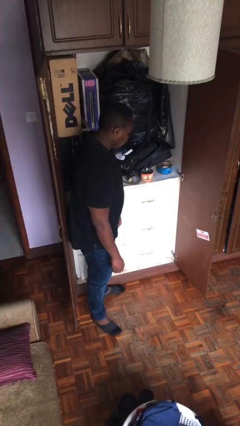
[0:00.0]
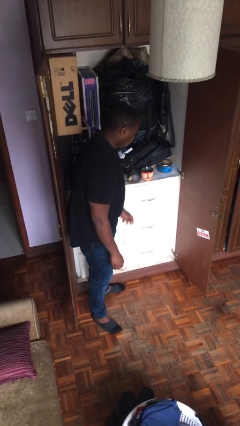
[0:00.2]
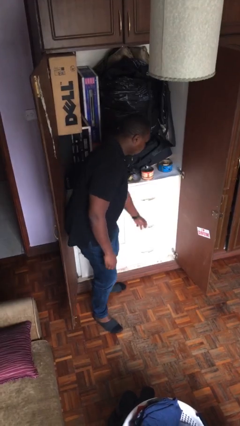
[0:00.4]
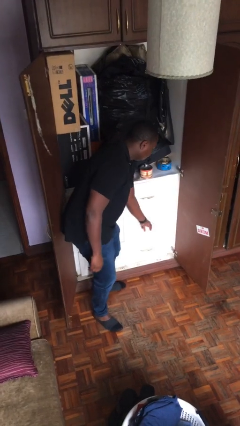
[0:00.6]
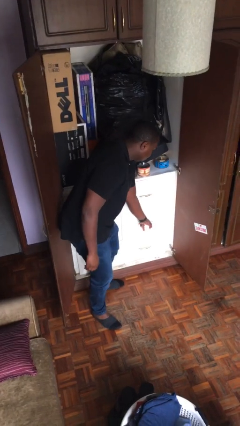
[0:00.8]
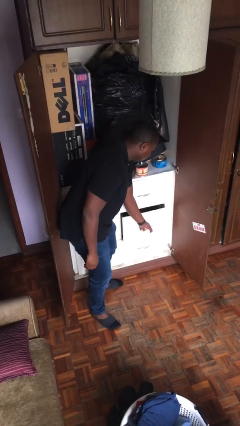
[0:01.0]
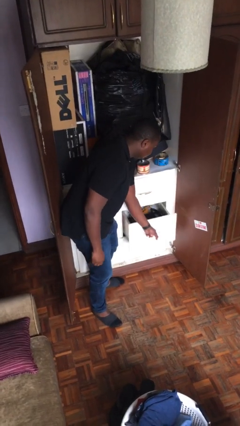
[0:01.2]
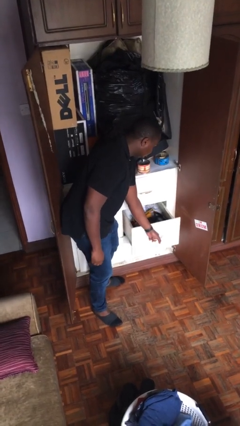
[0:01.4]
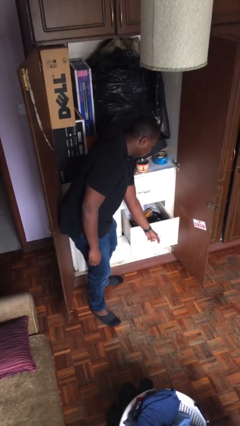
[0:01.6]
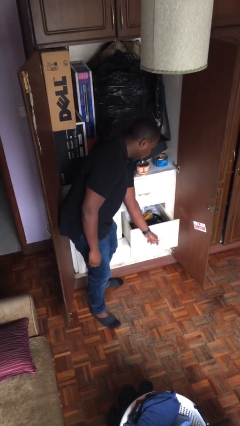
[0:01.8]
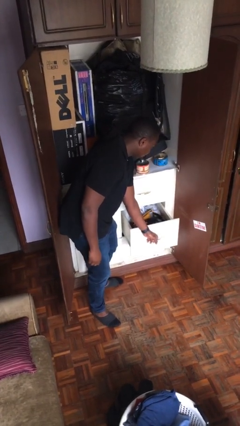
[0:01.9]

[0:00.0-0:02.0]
person opens dresser drawer

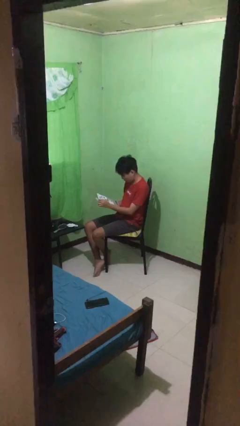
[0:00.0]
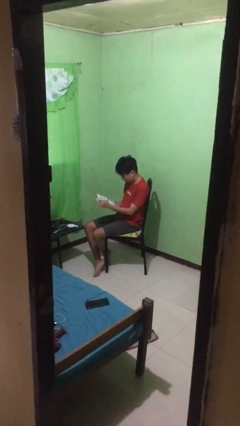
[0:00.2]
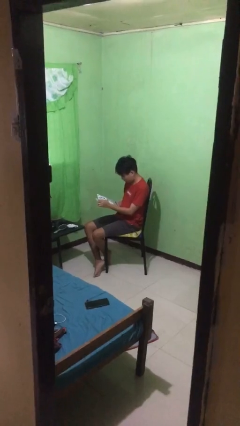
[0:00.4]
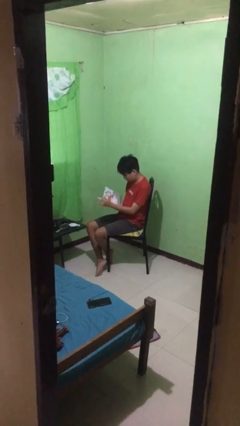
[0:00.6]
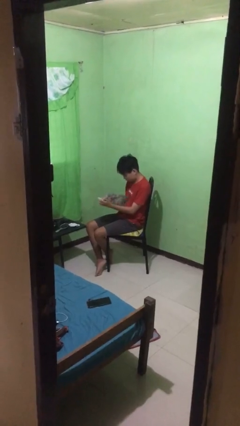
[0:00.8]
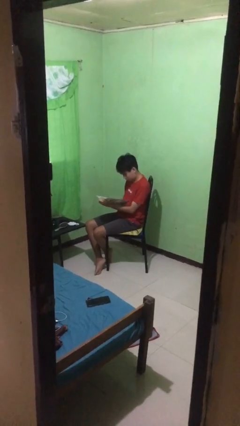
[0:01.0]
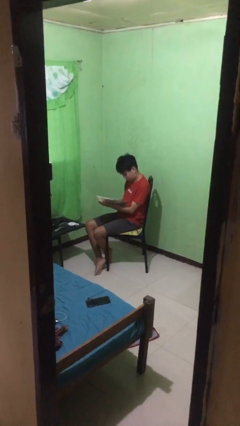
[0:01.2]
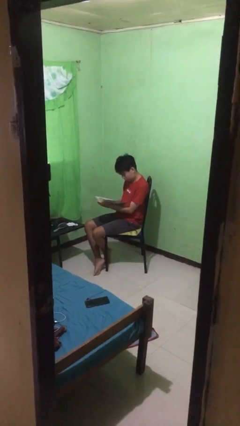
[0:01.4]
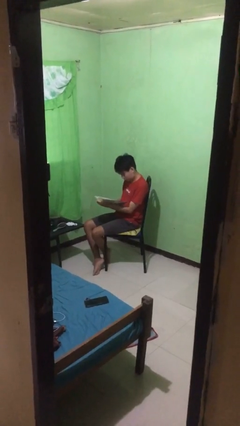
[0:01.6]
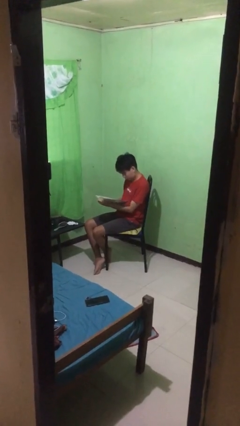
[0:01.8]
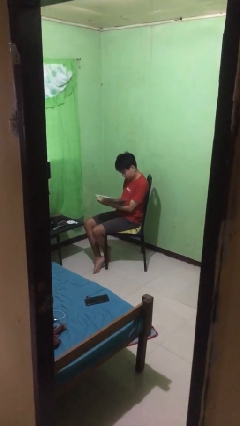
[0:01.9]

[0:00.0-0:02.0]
person reads document

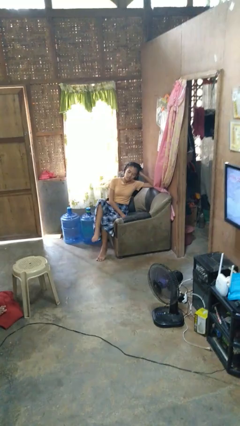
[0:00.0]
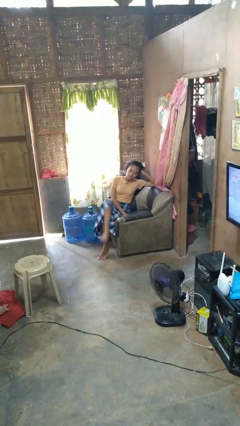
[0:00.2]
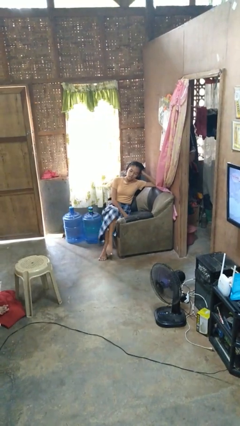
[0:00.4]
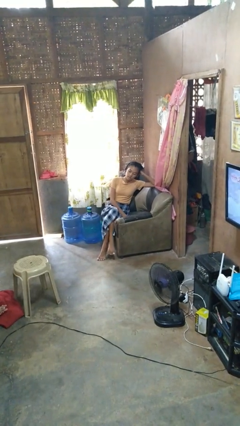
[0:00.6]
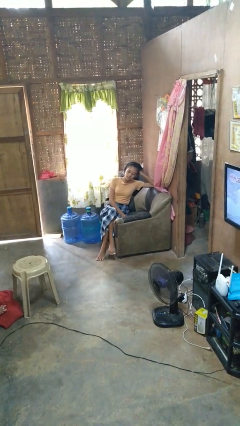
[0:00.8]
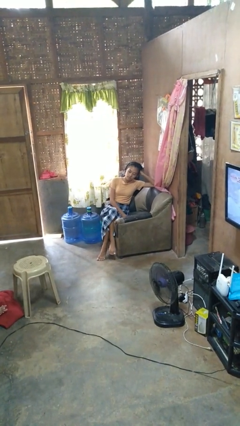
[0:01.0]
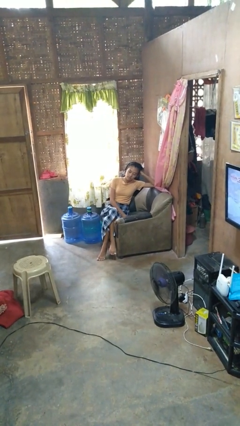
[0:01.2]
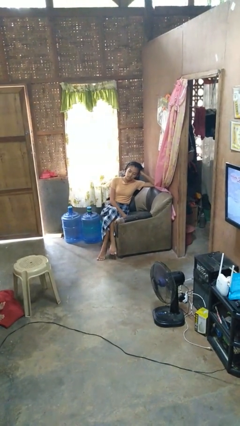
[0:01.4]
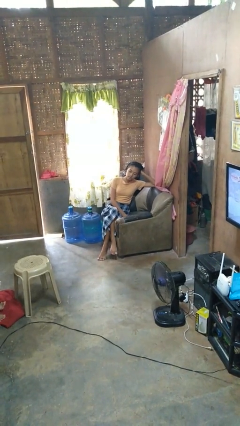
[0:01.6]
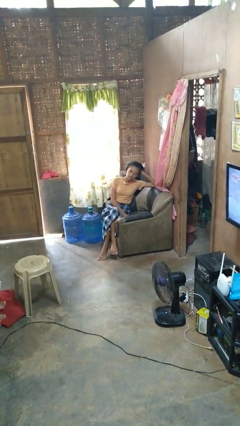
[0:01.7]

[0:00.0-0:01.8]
person crosses legs

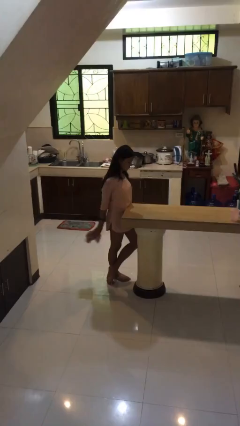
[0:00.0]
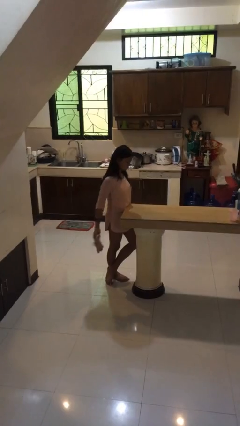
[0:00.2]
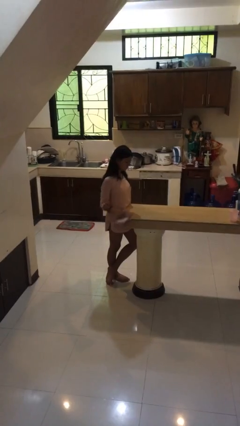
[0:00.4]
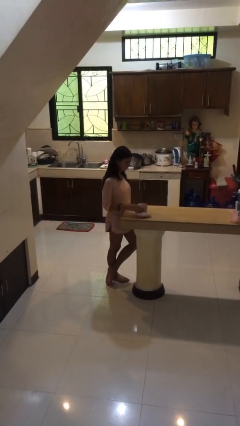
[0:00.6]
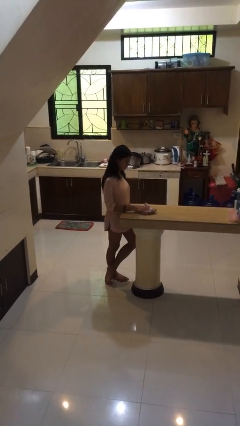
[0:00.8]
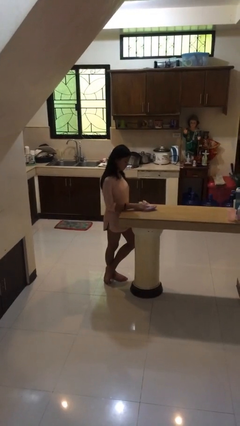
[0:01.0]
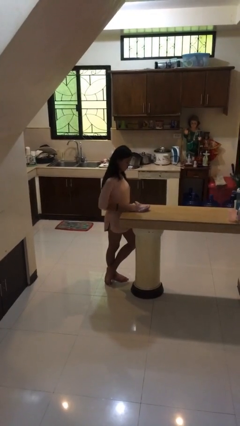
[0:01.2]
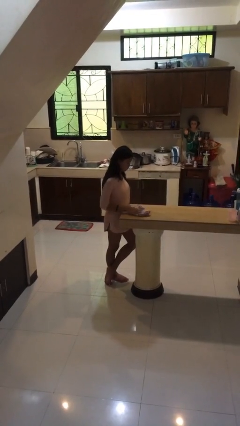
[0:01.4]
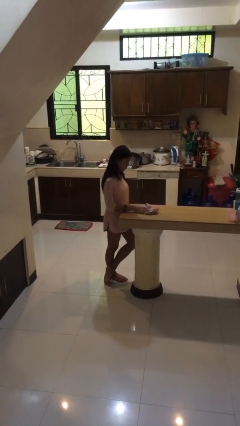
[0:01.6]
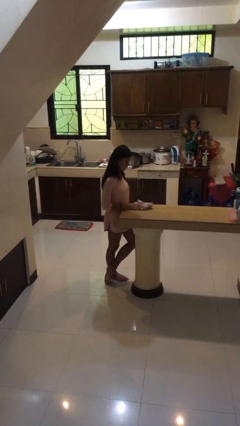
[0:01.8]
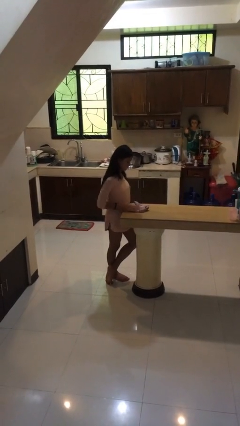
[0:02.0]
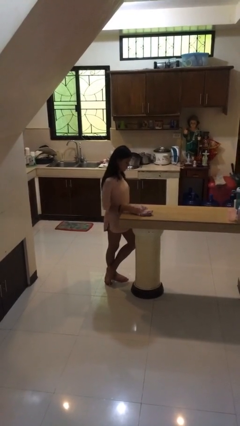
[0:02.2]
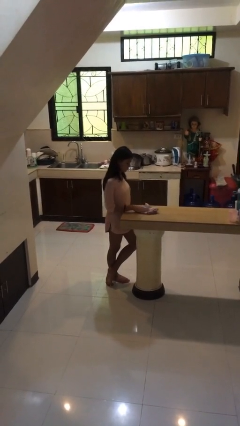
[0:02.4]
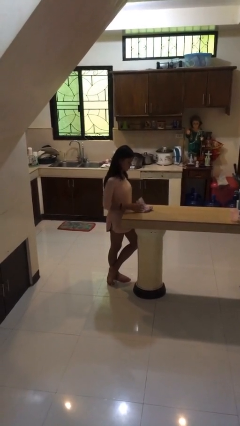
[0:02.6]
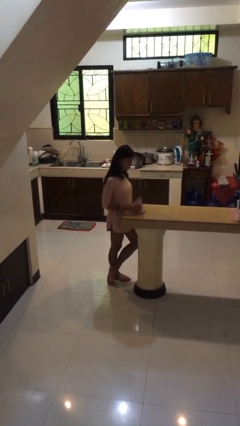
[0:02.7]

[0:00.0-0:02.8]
person cleans table with rag

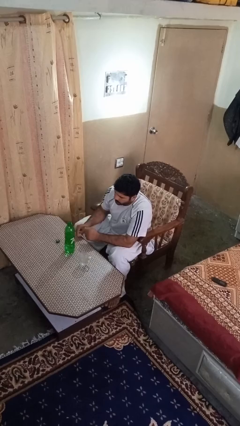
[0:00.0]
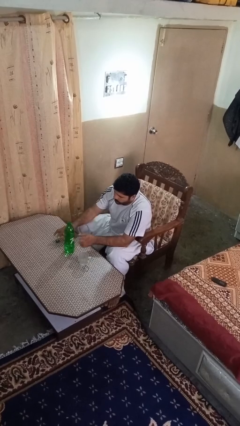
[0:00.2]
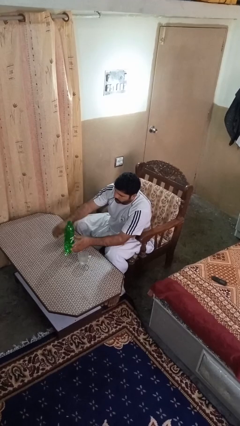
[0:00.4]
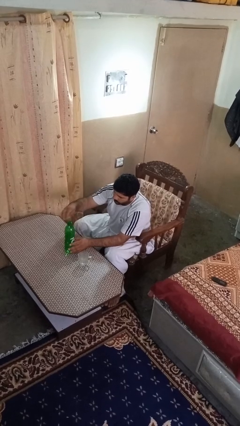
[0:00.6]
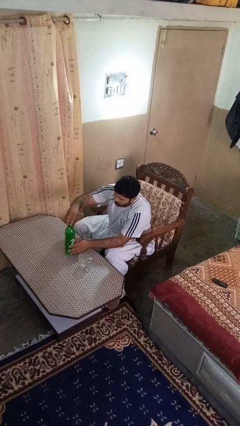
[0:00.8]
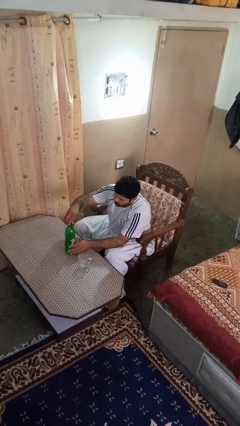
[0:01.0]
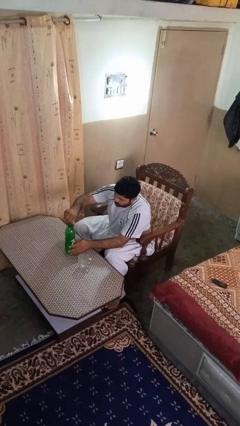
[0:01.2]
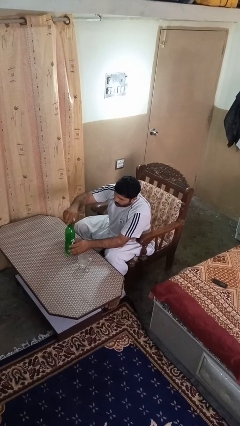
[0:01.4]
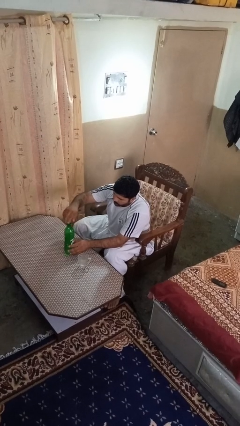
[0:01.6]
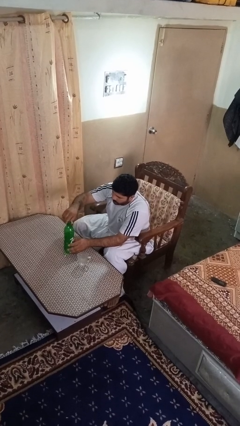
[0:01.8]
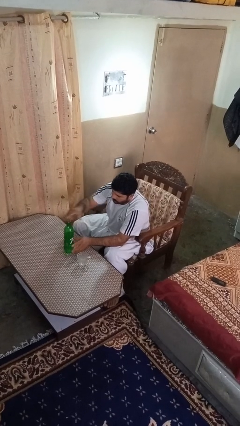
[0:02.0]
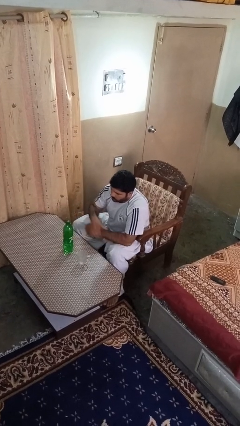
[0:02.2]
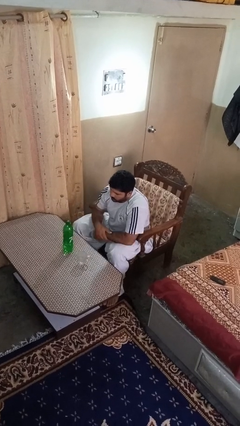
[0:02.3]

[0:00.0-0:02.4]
person screws lid to bottle

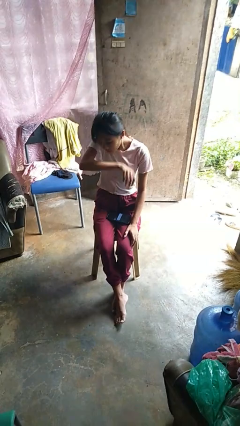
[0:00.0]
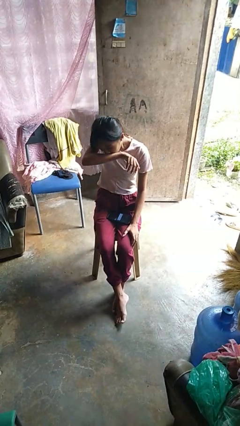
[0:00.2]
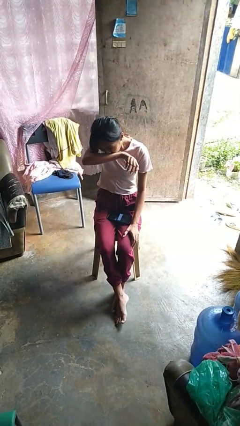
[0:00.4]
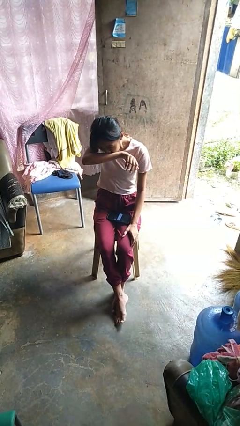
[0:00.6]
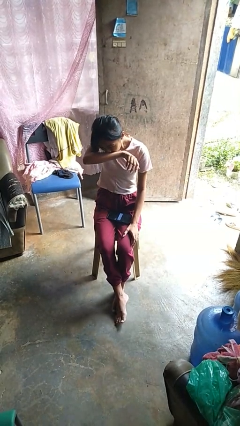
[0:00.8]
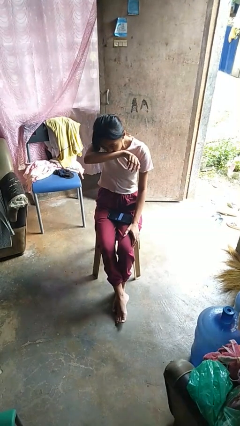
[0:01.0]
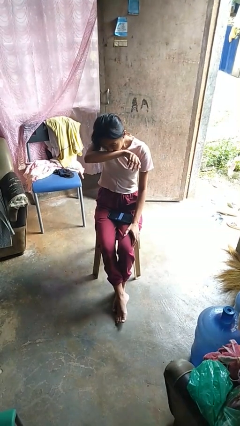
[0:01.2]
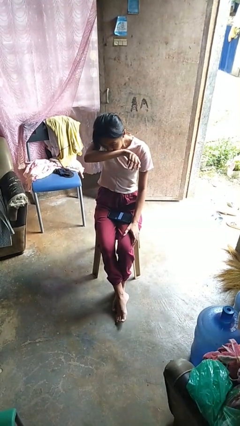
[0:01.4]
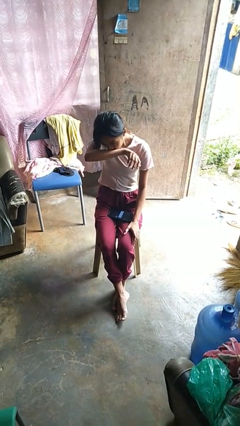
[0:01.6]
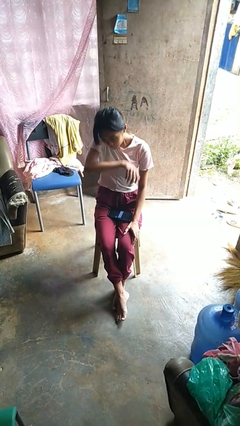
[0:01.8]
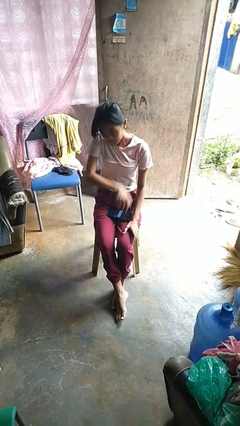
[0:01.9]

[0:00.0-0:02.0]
person sneezes into arm

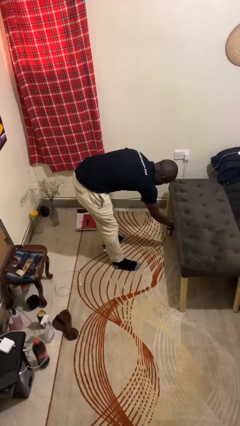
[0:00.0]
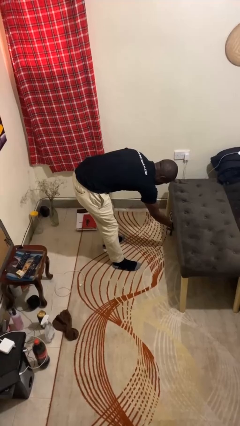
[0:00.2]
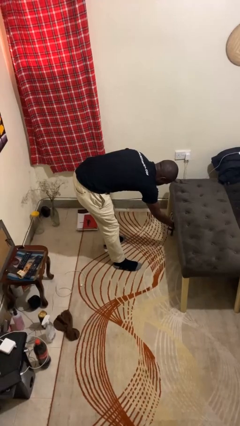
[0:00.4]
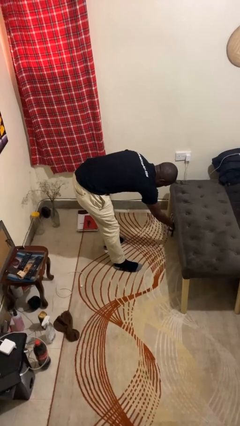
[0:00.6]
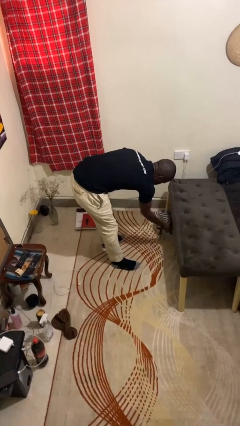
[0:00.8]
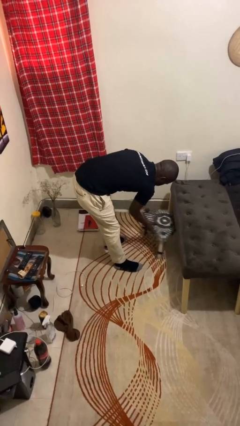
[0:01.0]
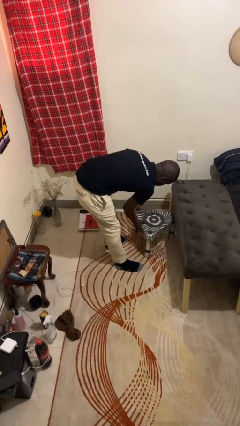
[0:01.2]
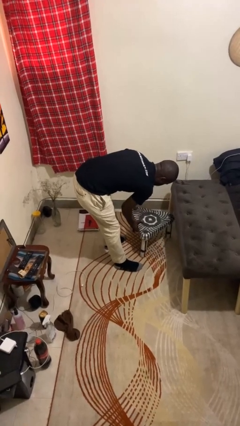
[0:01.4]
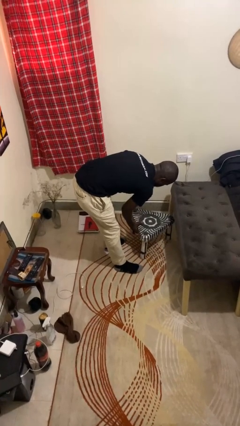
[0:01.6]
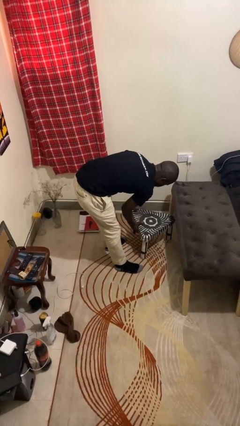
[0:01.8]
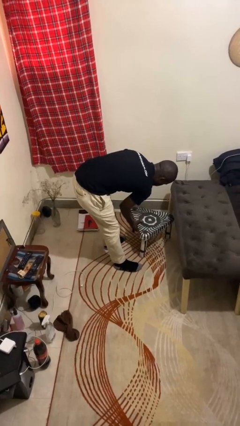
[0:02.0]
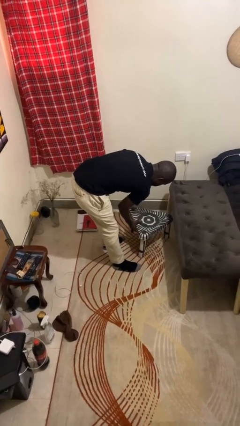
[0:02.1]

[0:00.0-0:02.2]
person pulls out chair

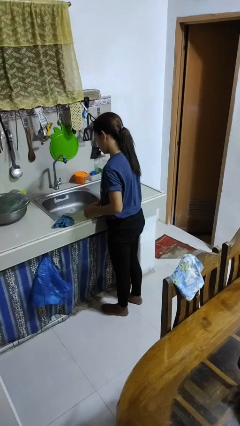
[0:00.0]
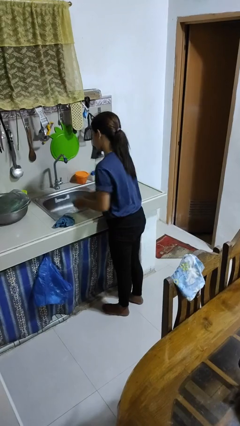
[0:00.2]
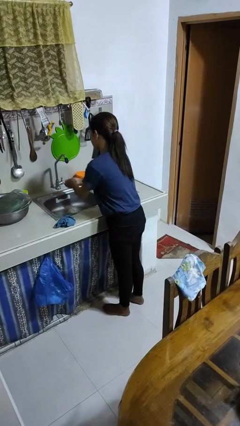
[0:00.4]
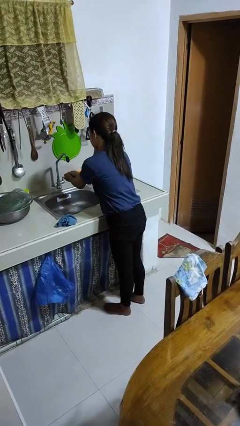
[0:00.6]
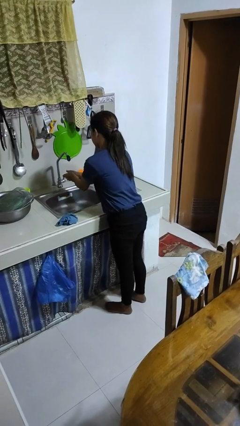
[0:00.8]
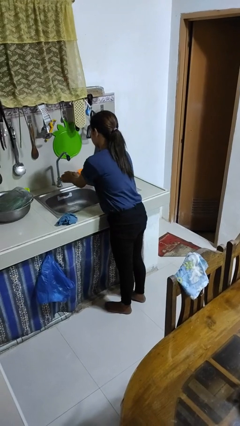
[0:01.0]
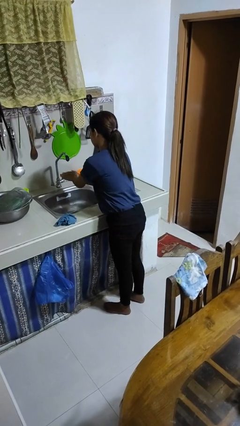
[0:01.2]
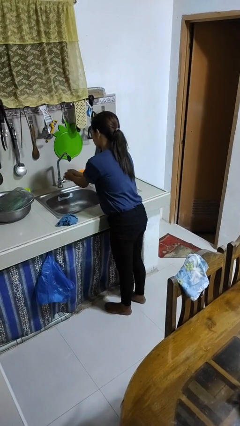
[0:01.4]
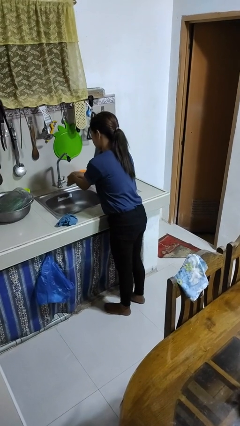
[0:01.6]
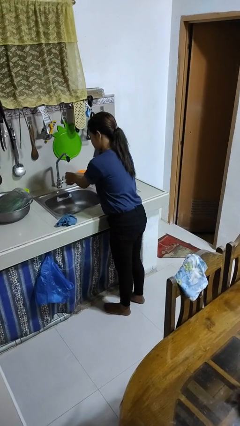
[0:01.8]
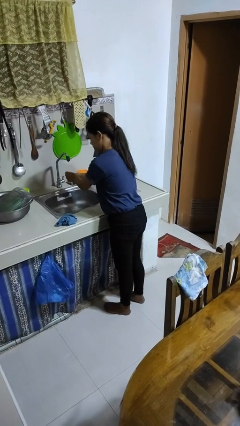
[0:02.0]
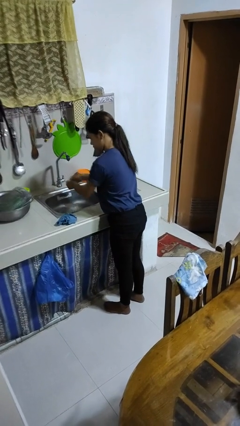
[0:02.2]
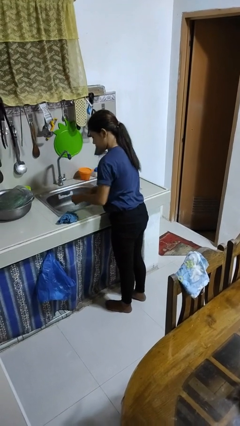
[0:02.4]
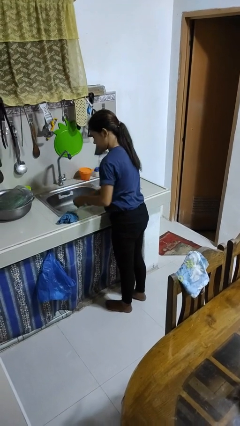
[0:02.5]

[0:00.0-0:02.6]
person washes hands
